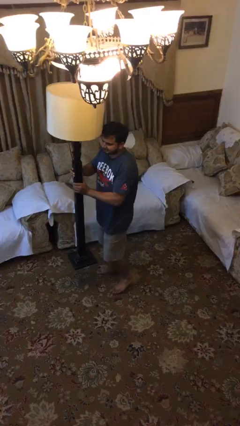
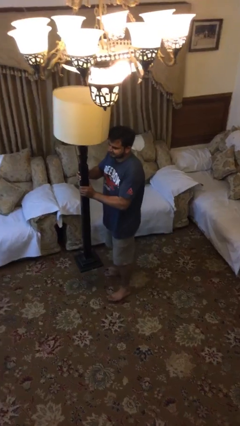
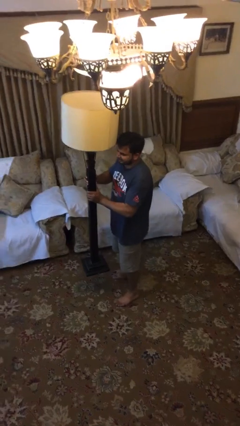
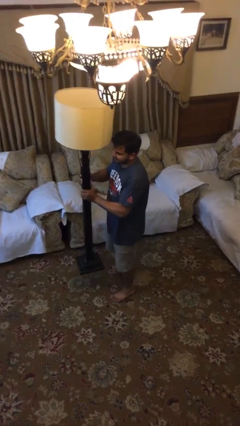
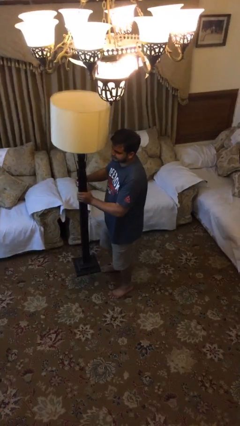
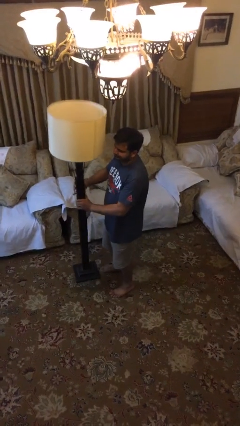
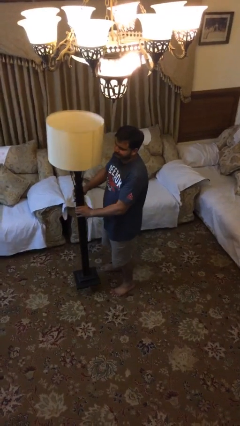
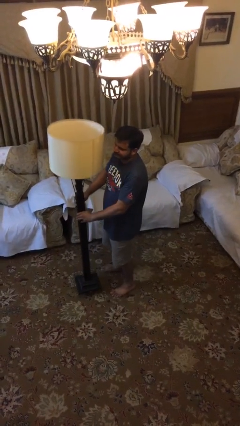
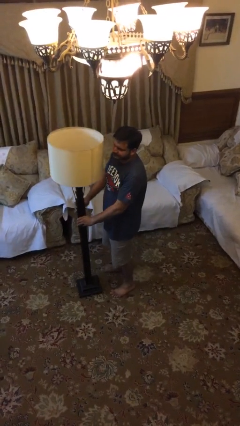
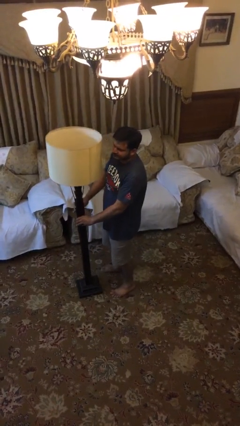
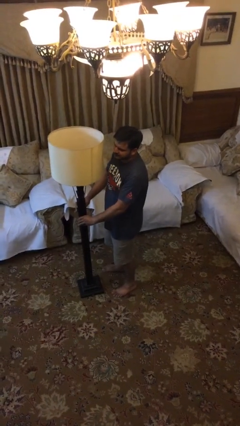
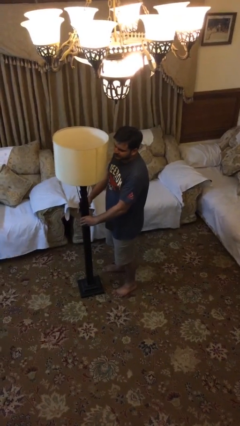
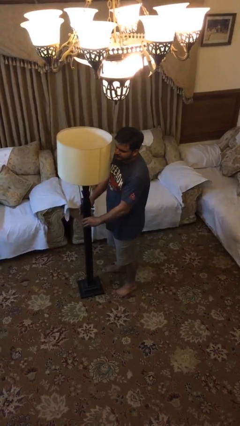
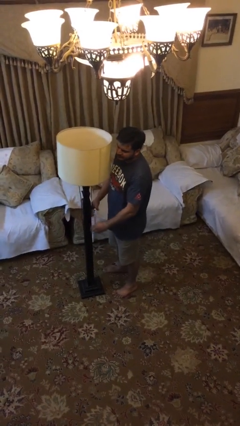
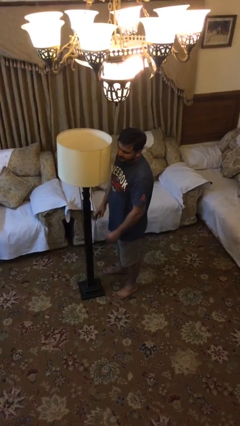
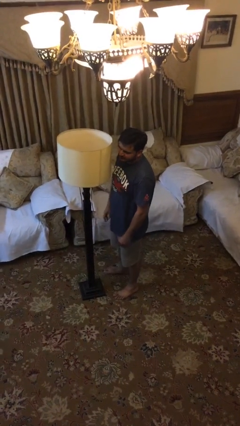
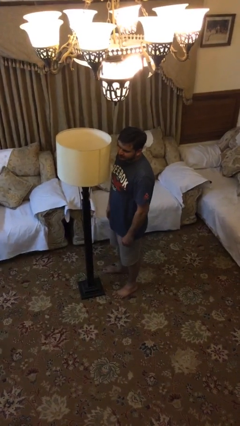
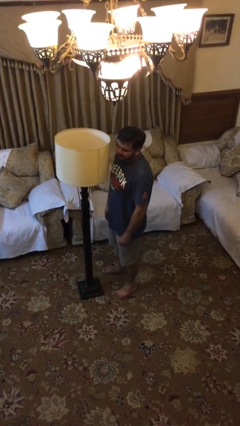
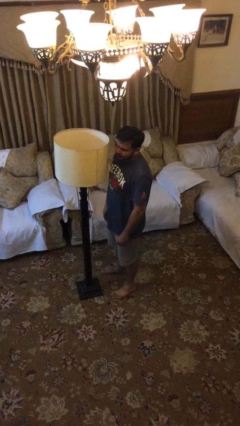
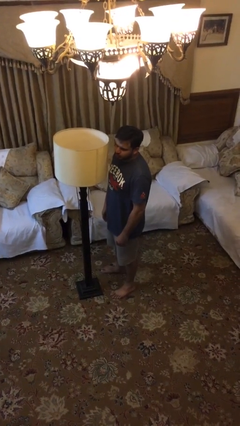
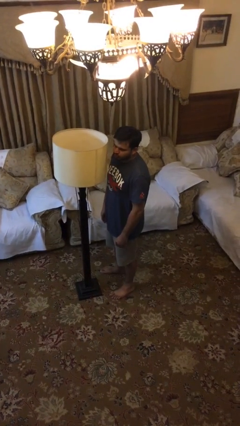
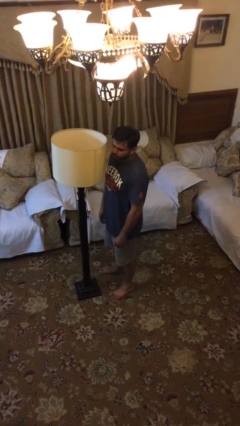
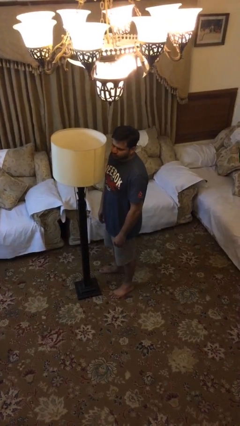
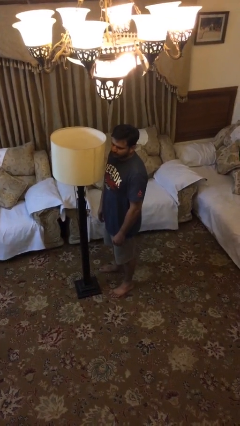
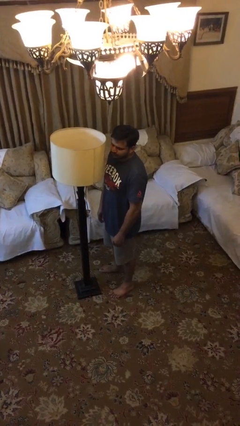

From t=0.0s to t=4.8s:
person puts down object on floor

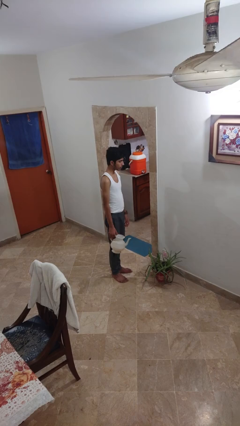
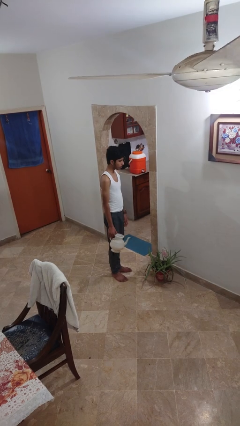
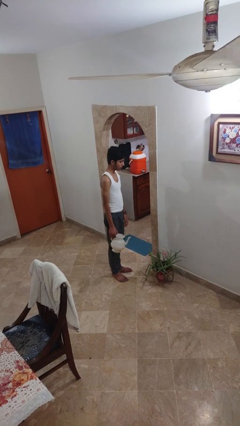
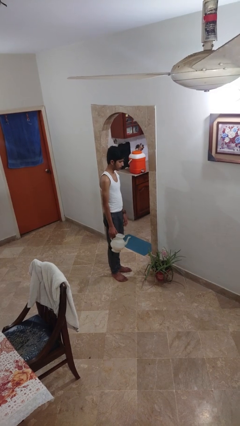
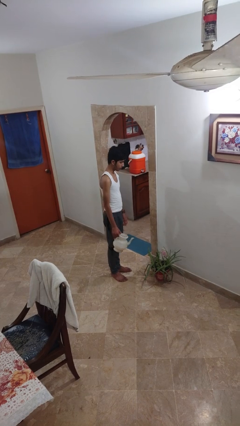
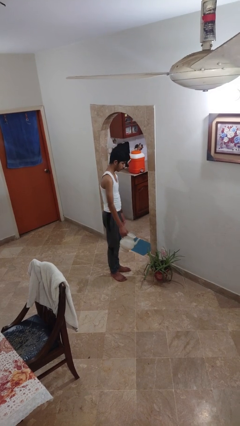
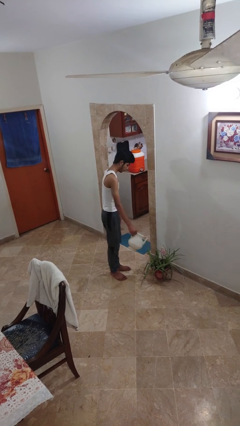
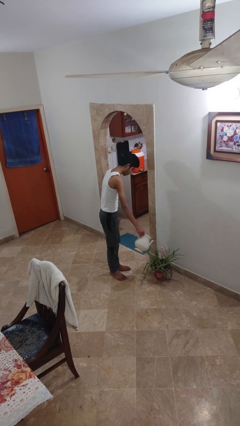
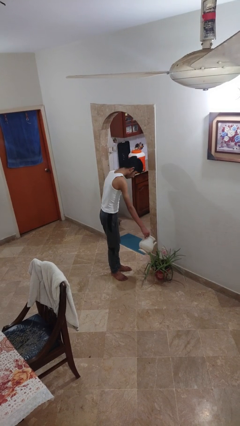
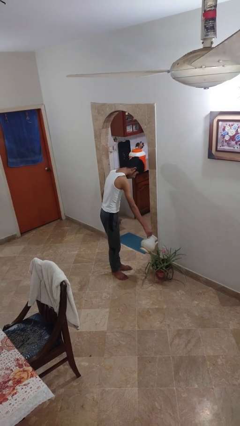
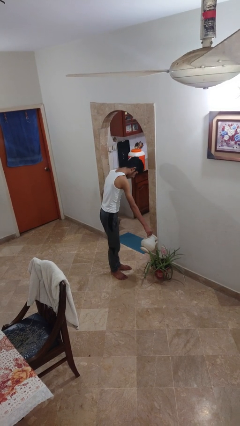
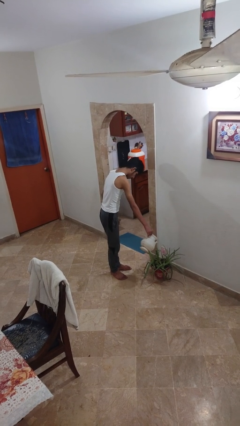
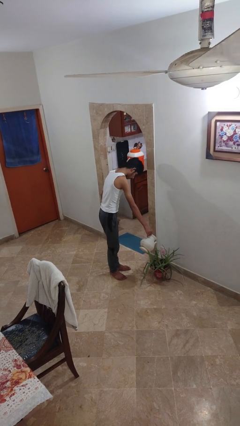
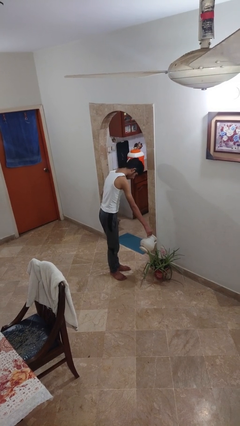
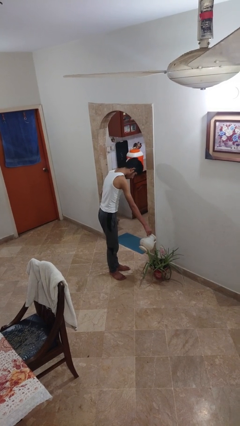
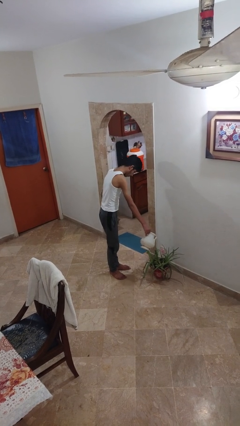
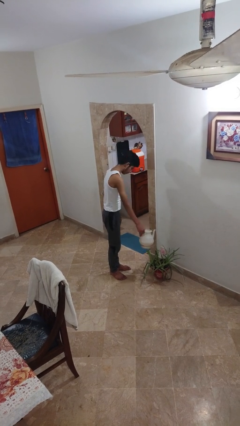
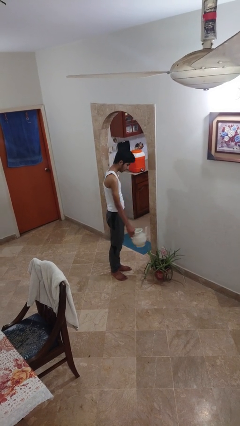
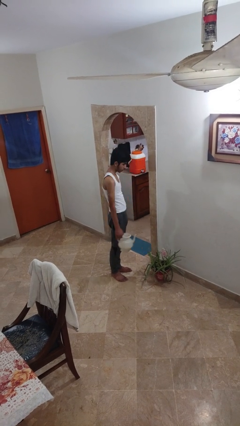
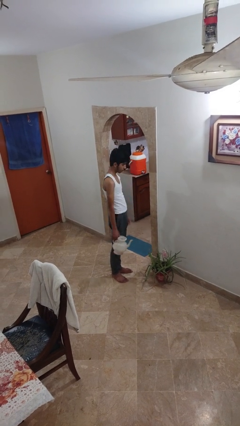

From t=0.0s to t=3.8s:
person waters houseplant

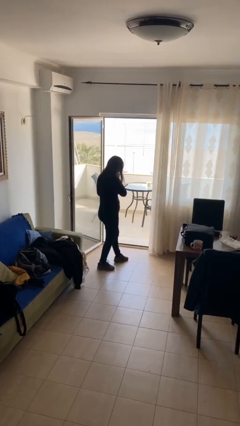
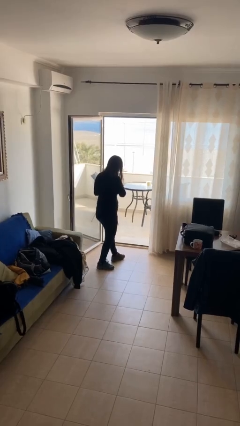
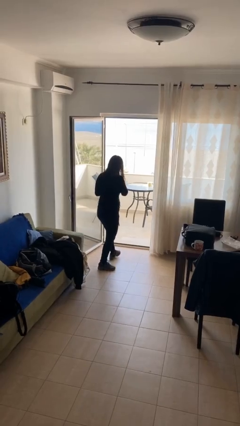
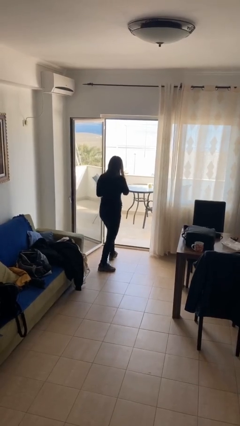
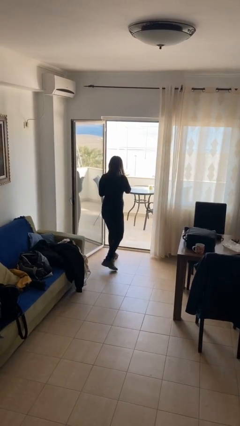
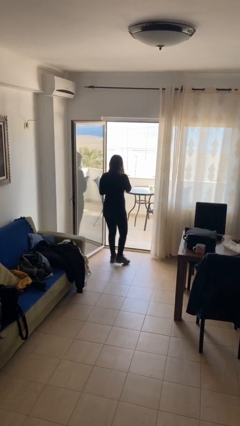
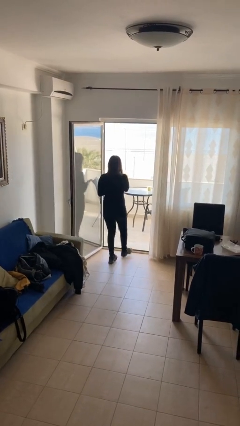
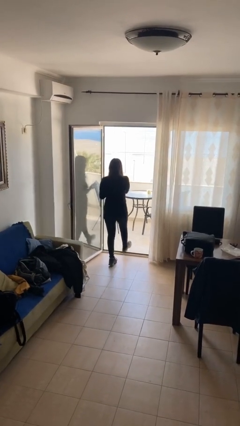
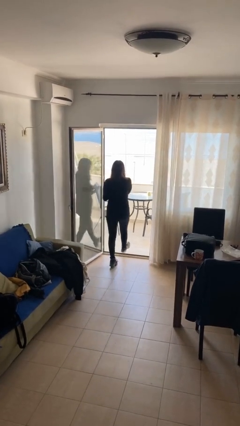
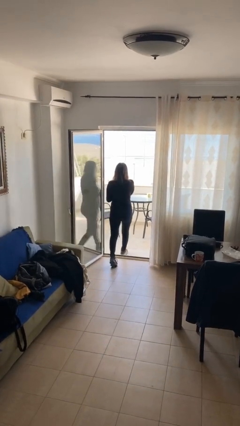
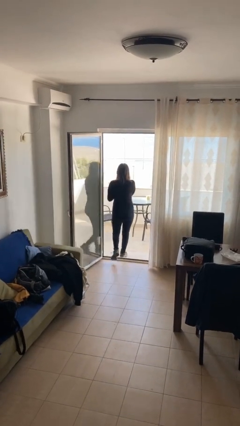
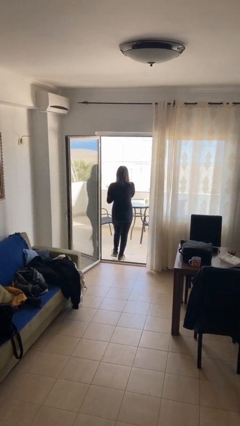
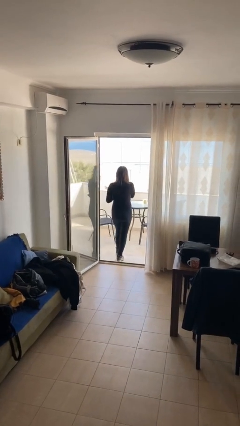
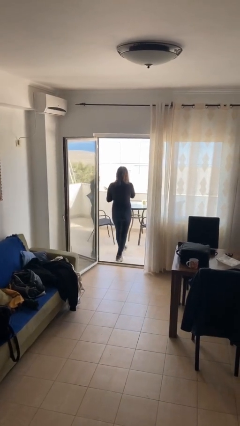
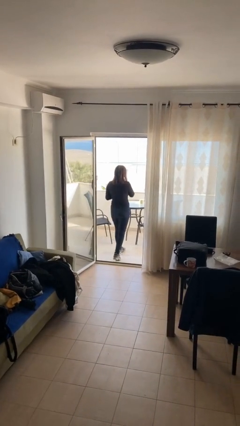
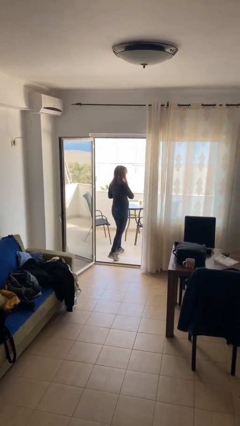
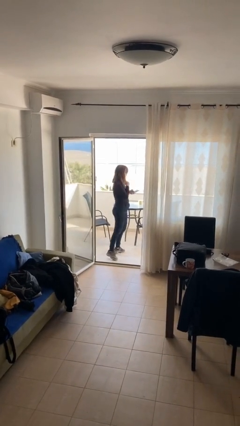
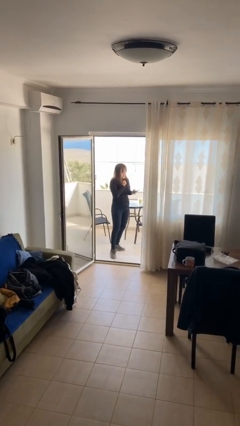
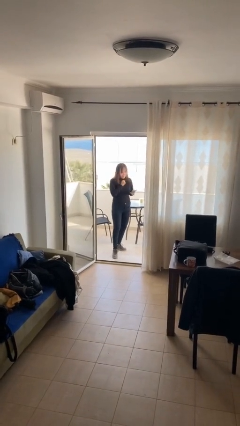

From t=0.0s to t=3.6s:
person exits scene through structure

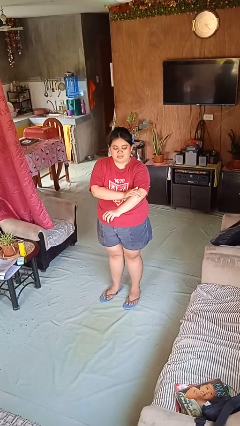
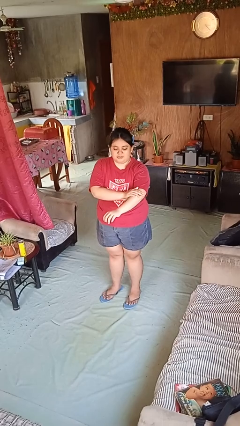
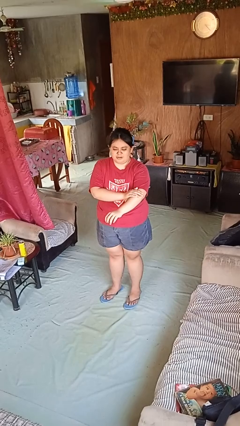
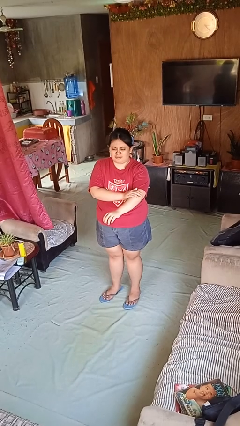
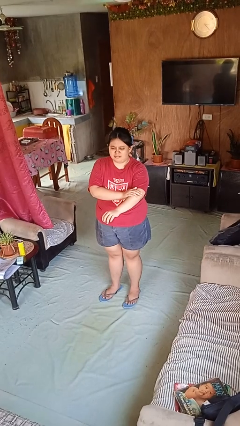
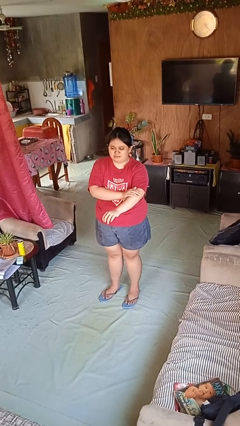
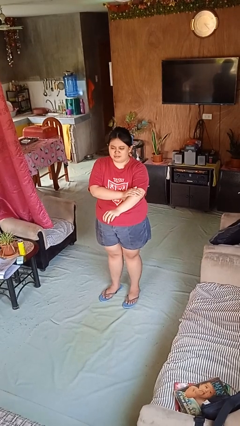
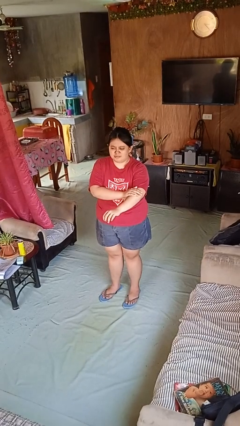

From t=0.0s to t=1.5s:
person swats bug

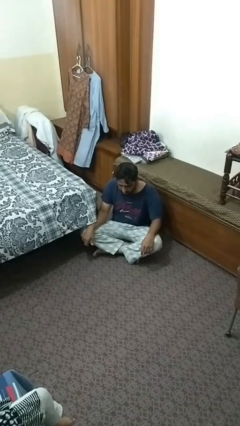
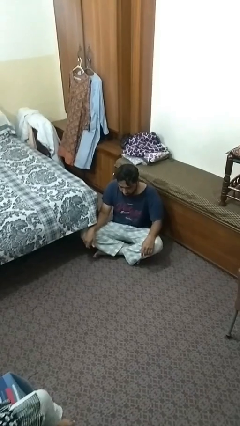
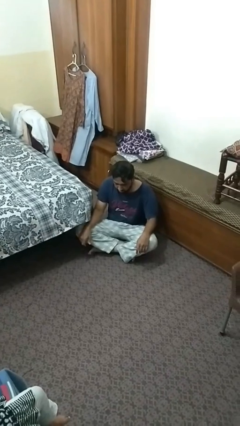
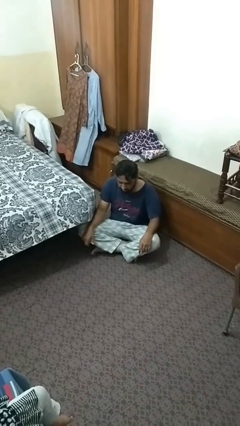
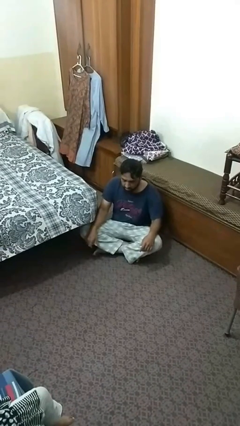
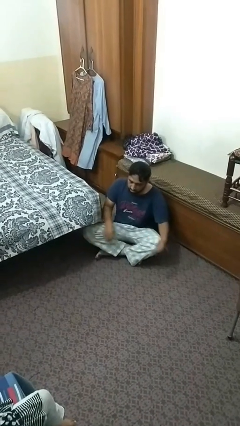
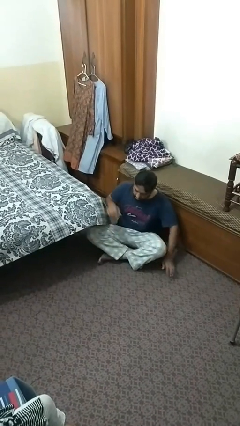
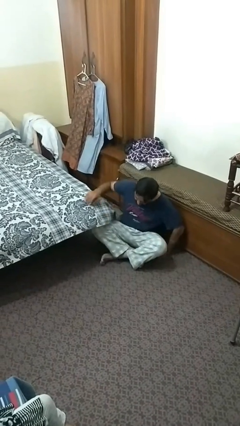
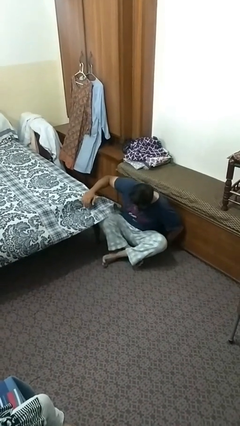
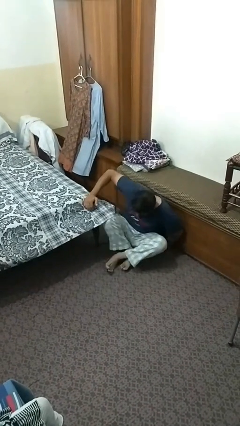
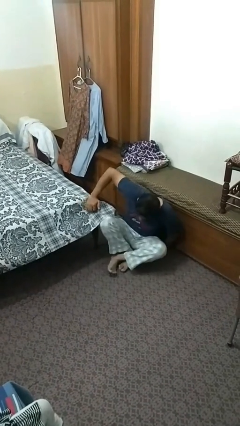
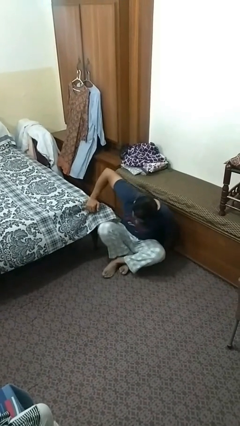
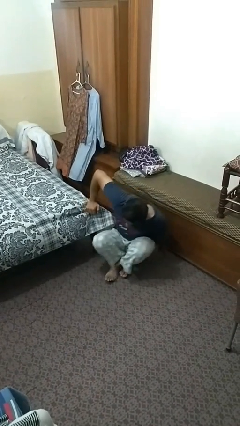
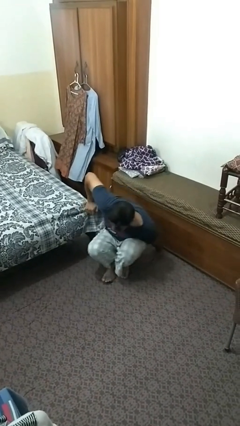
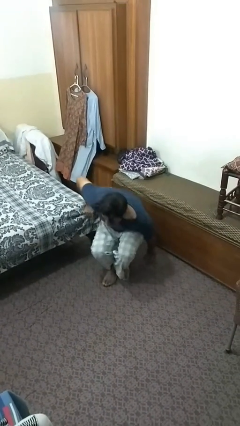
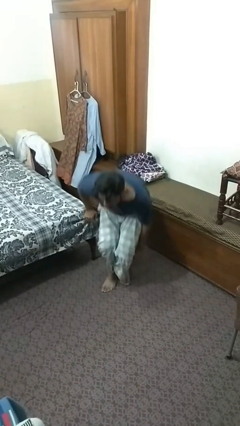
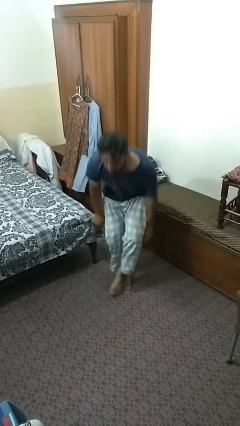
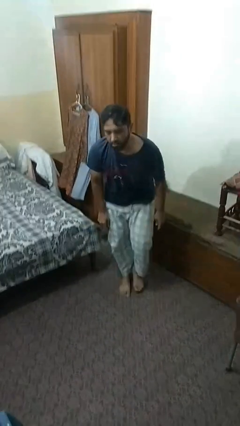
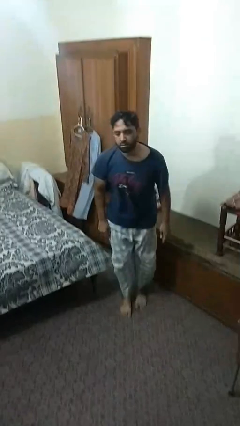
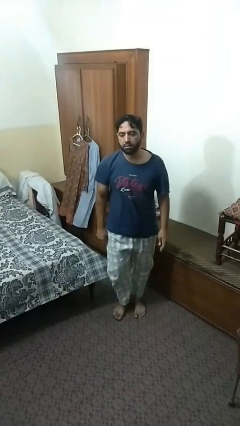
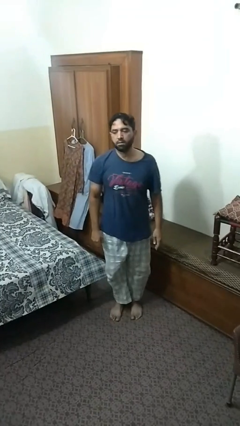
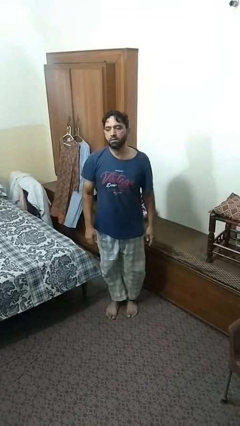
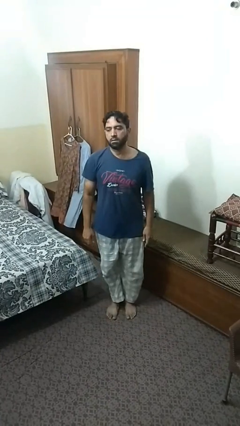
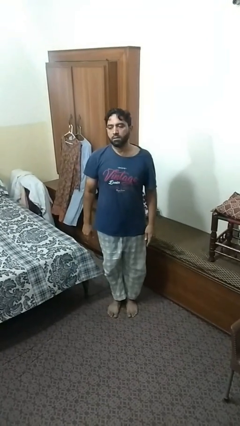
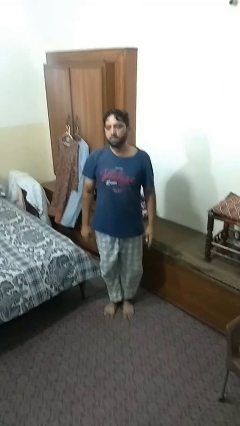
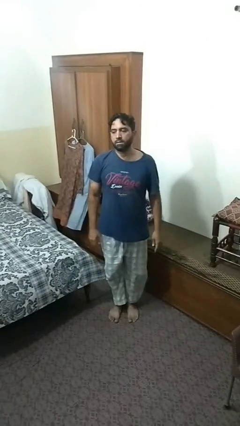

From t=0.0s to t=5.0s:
person stands up from floor
